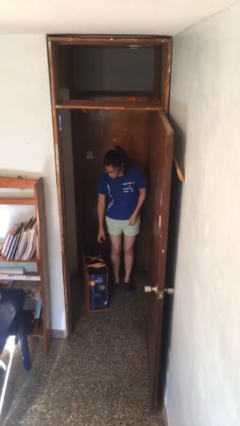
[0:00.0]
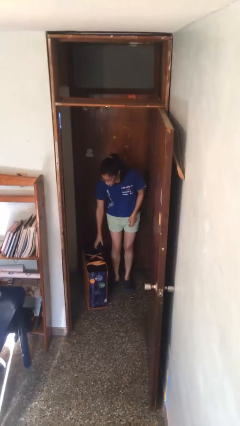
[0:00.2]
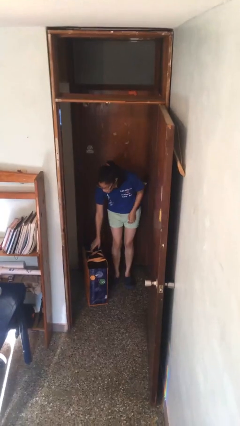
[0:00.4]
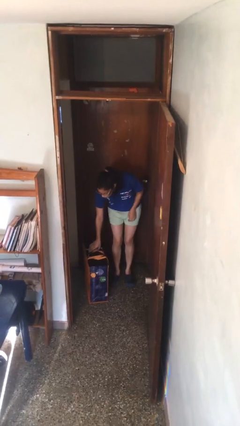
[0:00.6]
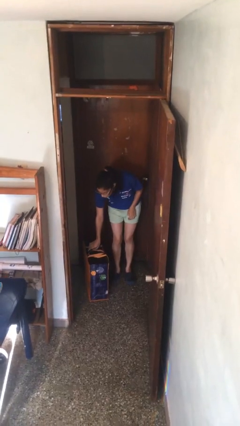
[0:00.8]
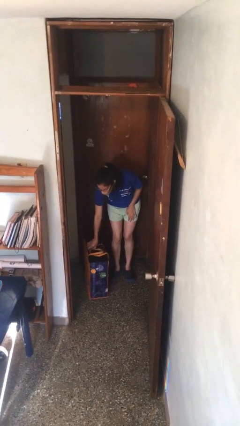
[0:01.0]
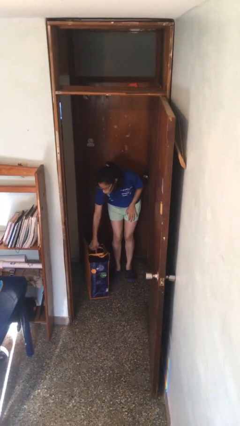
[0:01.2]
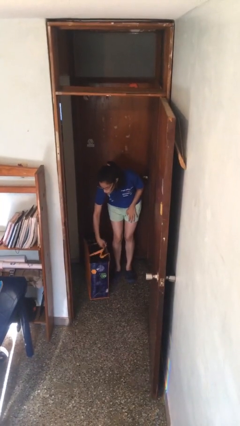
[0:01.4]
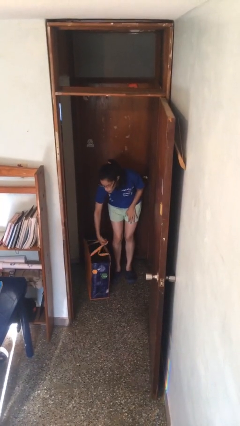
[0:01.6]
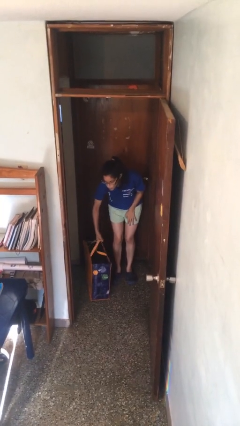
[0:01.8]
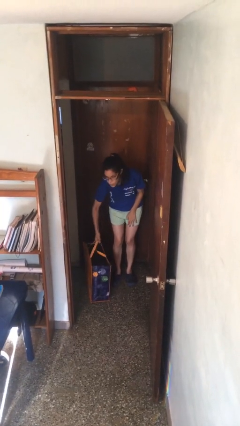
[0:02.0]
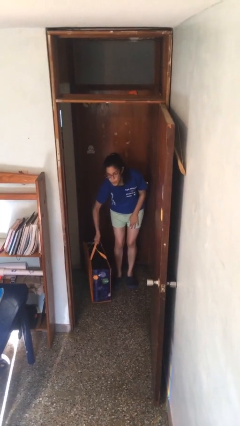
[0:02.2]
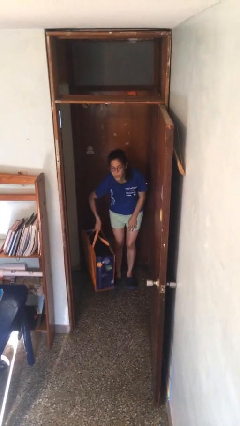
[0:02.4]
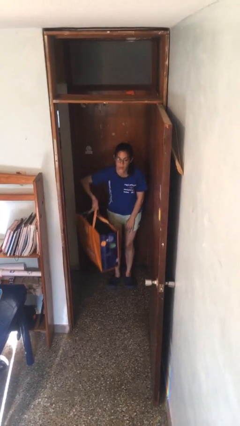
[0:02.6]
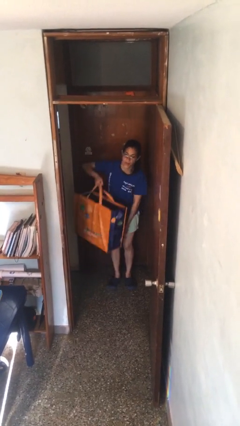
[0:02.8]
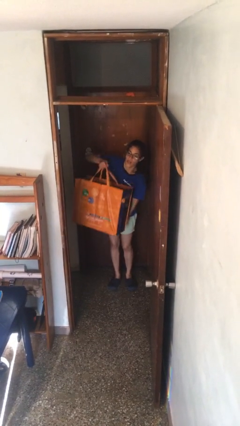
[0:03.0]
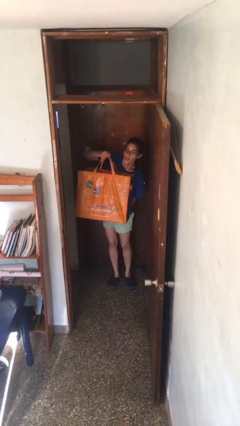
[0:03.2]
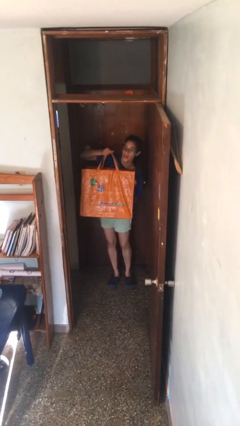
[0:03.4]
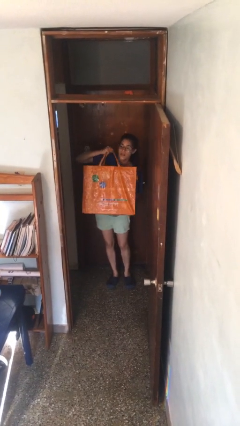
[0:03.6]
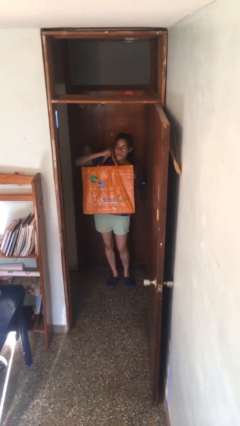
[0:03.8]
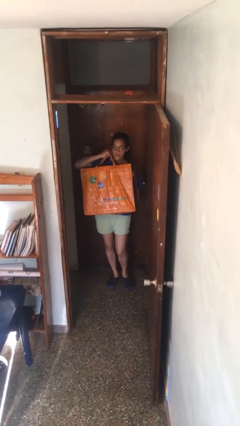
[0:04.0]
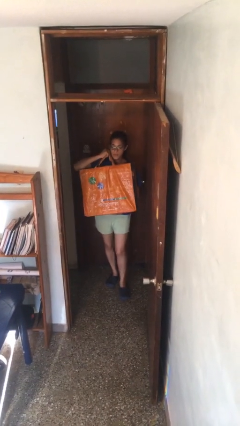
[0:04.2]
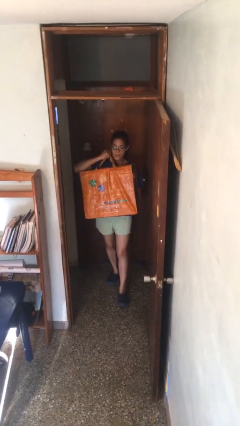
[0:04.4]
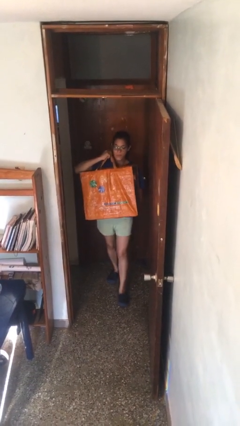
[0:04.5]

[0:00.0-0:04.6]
person picks up object from floor

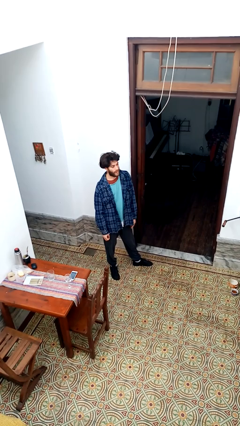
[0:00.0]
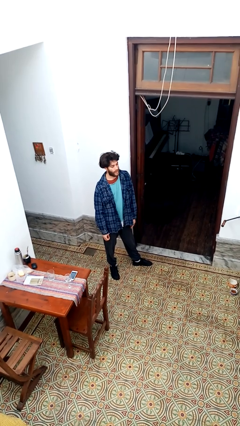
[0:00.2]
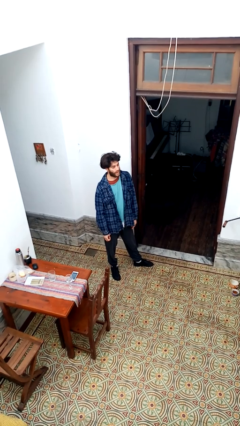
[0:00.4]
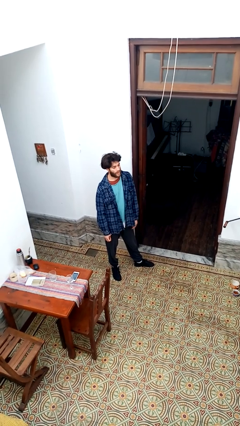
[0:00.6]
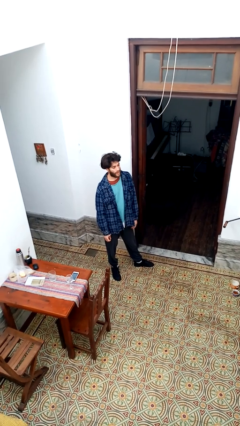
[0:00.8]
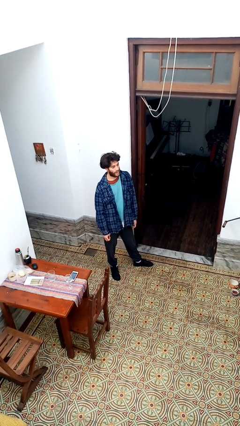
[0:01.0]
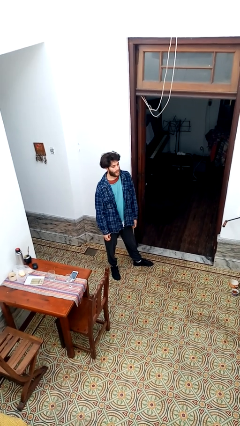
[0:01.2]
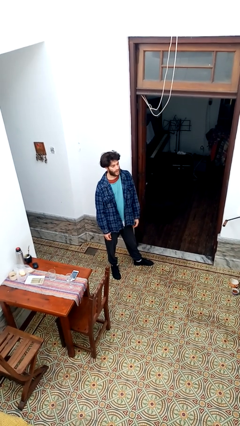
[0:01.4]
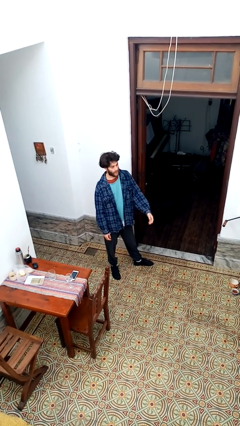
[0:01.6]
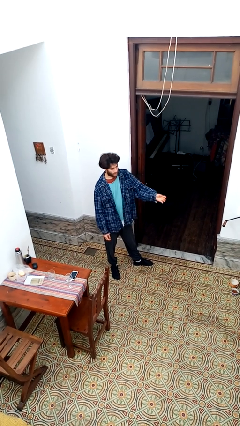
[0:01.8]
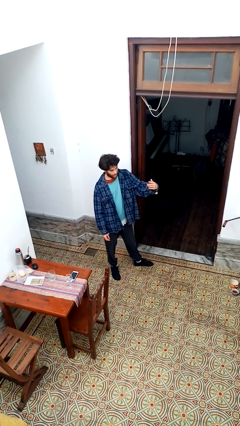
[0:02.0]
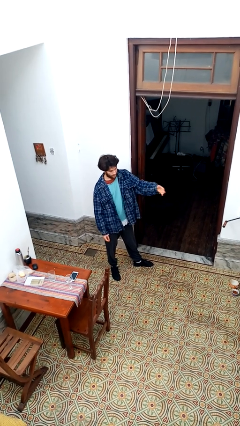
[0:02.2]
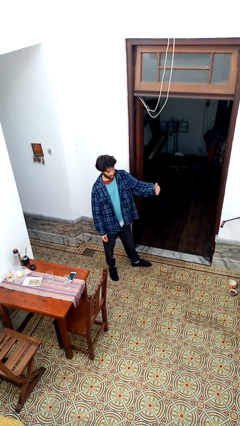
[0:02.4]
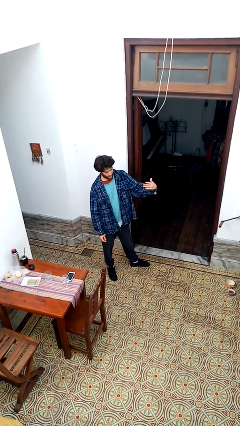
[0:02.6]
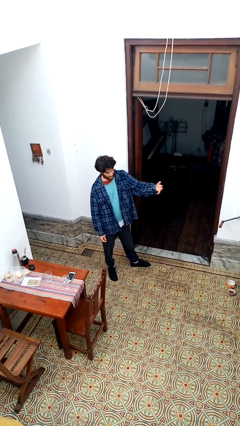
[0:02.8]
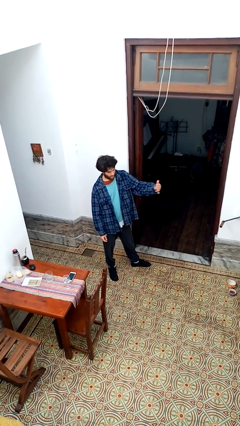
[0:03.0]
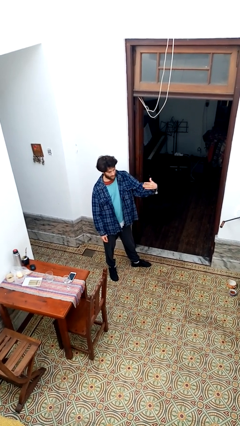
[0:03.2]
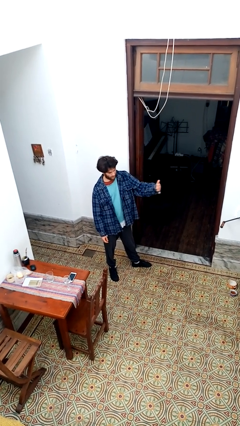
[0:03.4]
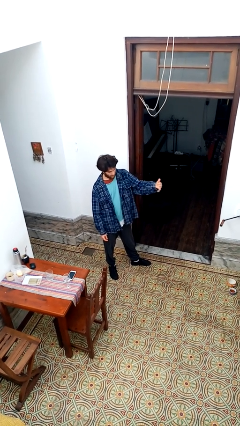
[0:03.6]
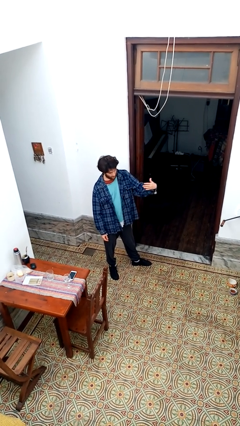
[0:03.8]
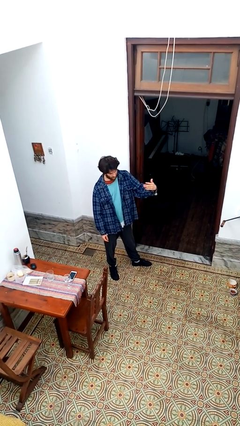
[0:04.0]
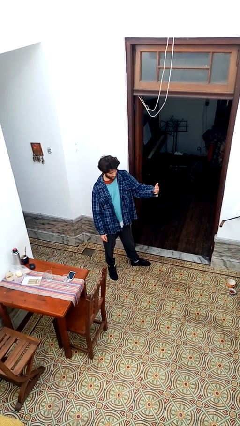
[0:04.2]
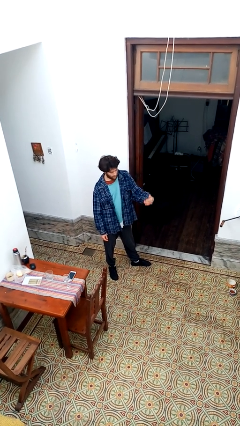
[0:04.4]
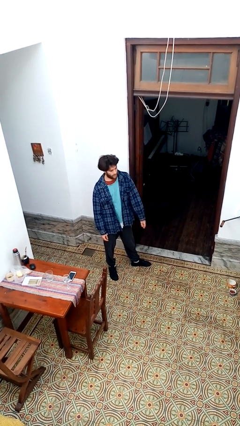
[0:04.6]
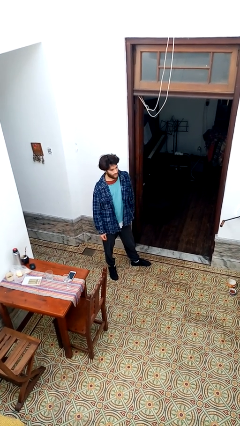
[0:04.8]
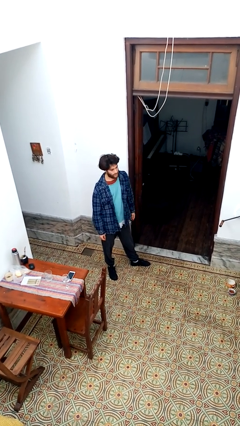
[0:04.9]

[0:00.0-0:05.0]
person gestures come here

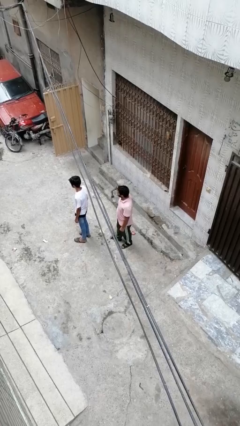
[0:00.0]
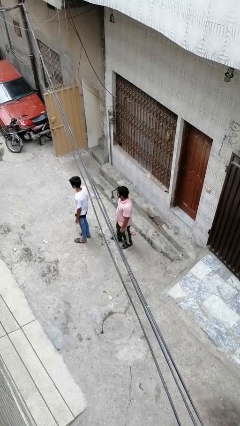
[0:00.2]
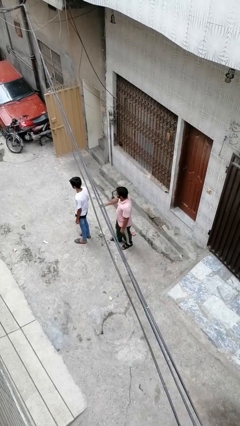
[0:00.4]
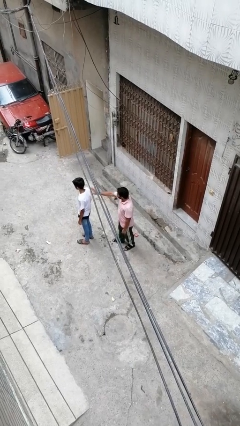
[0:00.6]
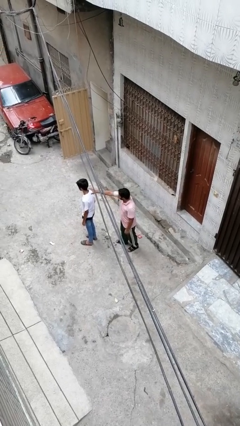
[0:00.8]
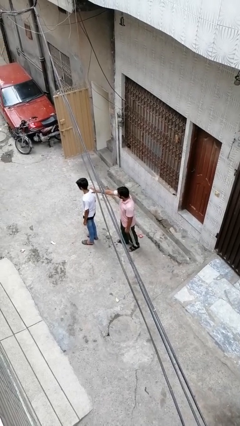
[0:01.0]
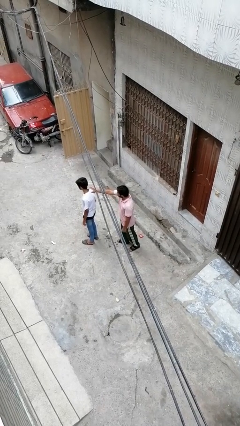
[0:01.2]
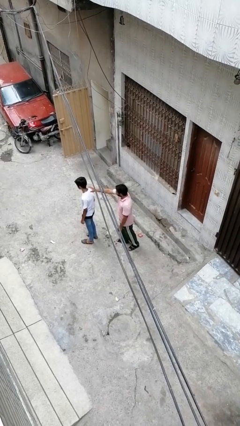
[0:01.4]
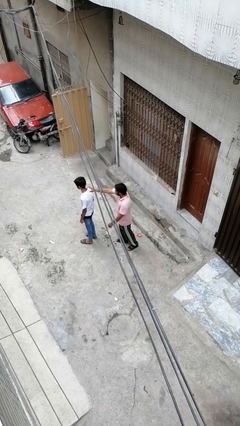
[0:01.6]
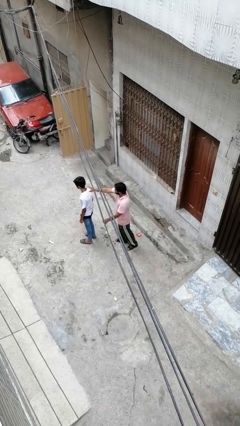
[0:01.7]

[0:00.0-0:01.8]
person grabs person by shoulder

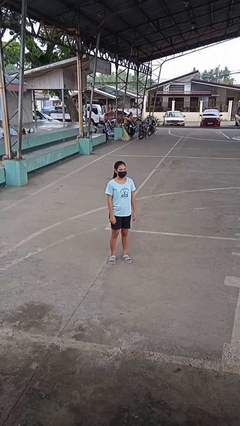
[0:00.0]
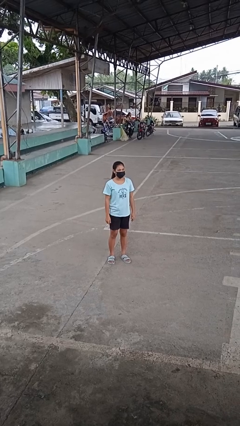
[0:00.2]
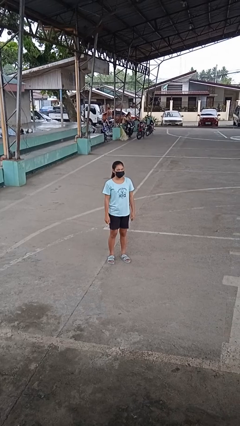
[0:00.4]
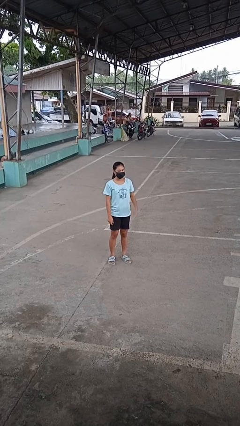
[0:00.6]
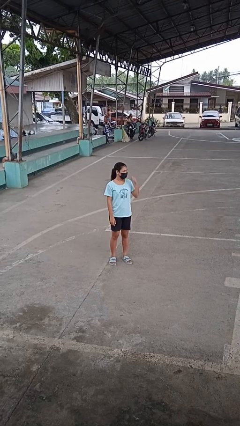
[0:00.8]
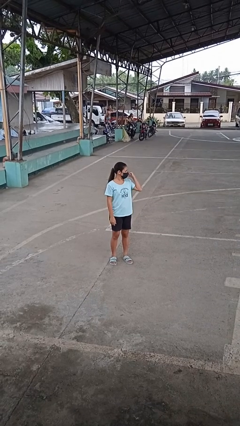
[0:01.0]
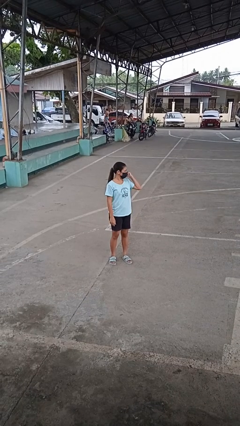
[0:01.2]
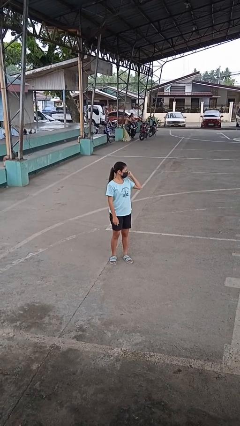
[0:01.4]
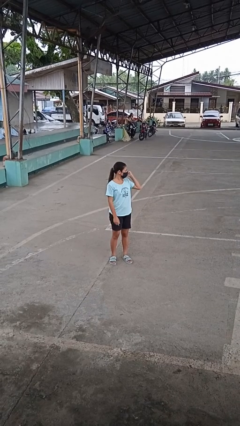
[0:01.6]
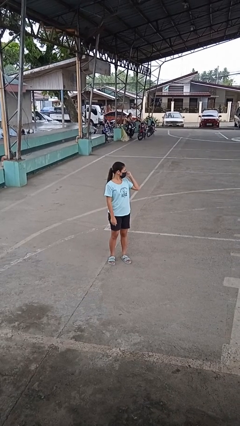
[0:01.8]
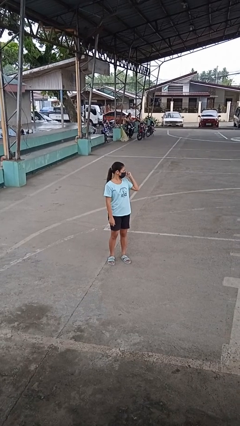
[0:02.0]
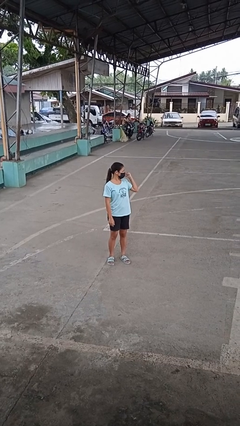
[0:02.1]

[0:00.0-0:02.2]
person gestures behind me

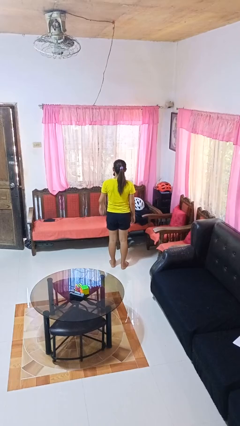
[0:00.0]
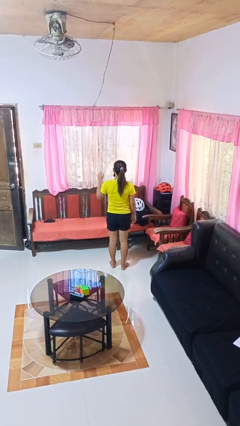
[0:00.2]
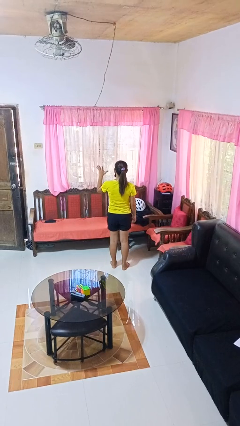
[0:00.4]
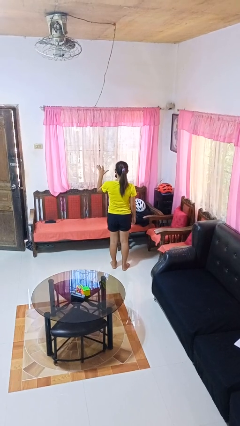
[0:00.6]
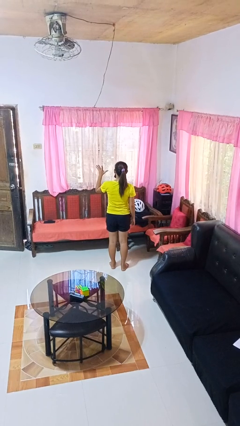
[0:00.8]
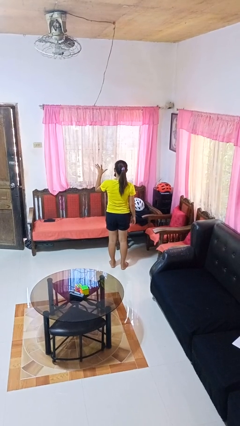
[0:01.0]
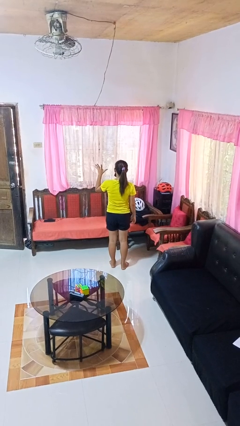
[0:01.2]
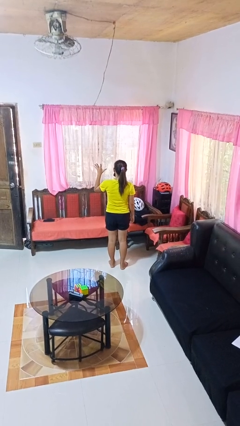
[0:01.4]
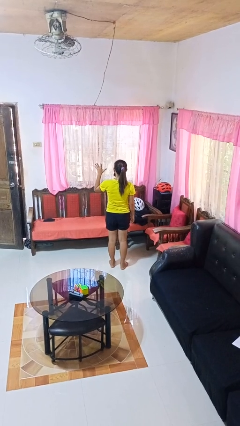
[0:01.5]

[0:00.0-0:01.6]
person gestures number five

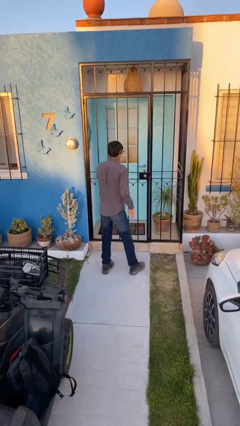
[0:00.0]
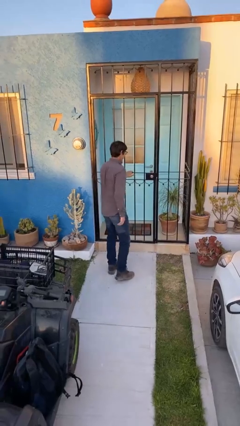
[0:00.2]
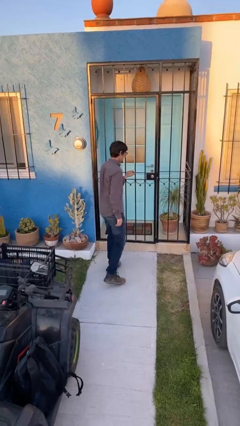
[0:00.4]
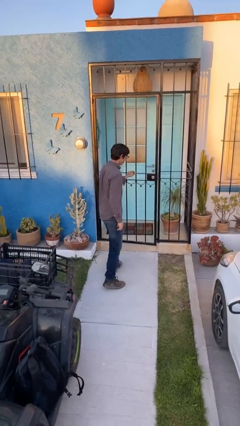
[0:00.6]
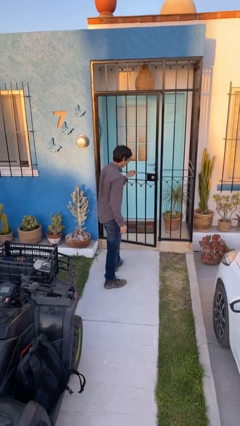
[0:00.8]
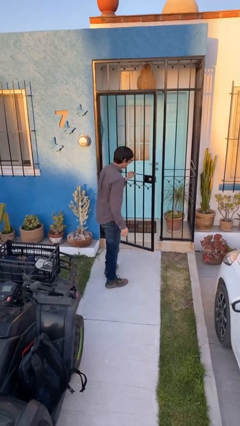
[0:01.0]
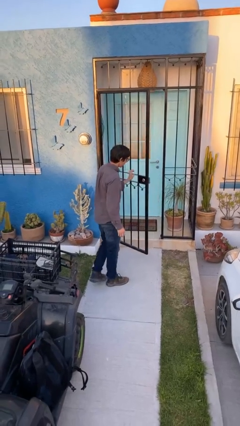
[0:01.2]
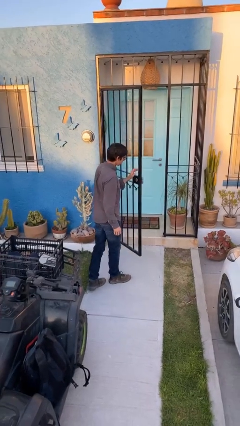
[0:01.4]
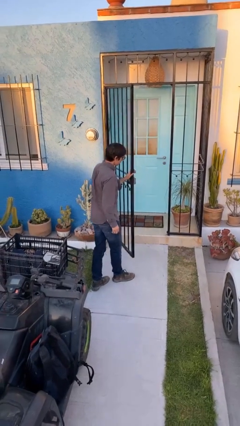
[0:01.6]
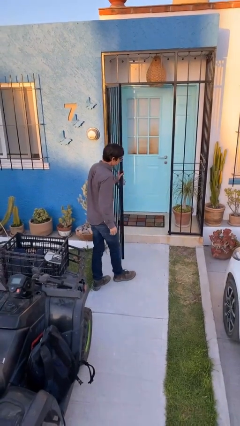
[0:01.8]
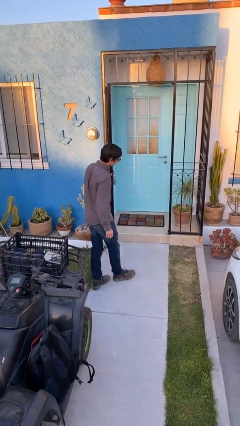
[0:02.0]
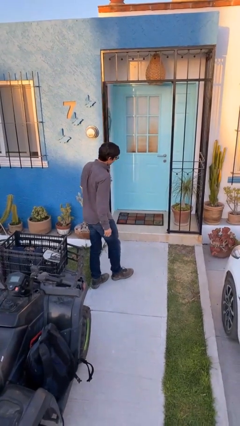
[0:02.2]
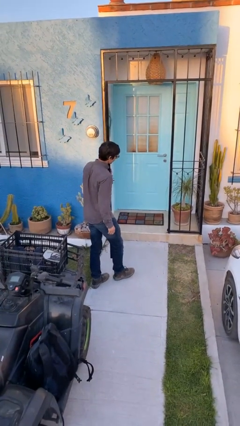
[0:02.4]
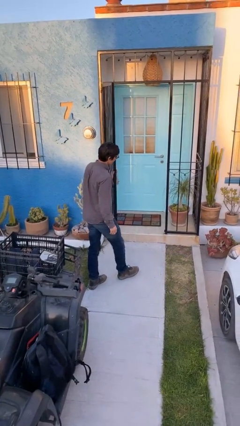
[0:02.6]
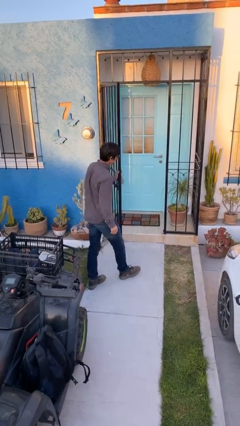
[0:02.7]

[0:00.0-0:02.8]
person opens facility door
